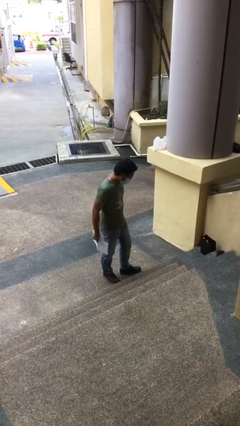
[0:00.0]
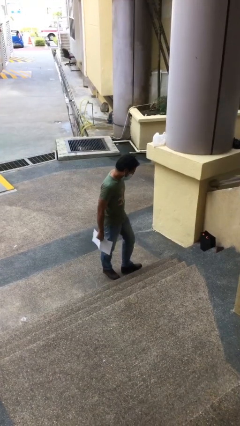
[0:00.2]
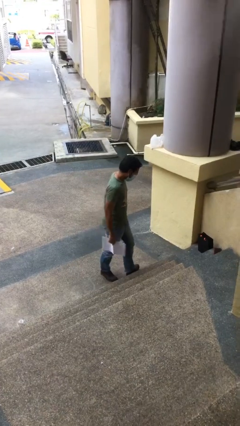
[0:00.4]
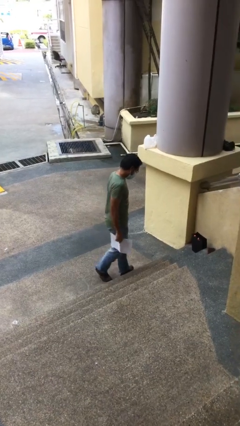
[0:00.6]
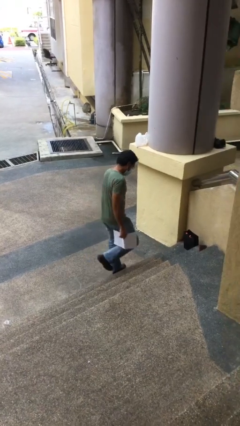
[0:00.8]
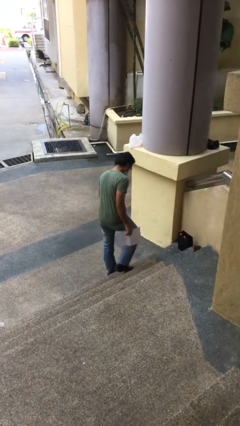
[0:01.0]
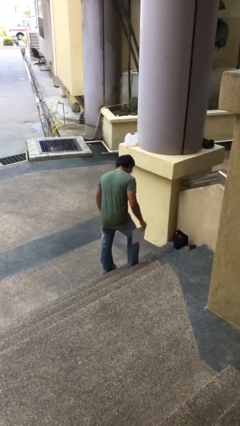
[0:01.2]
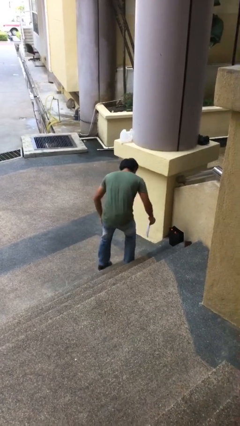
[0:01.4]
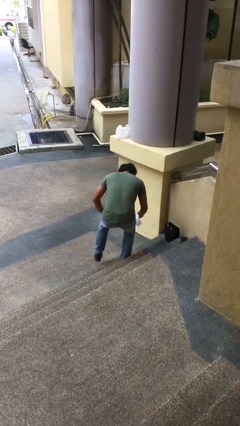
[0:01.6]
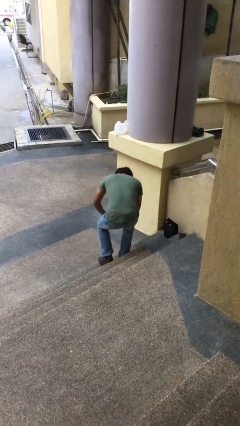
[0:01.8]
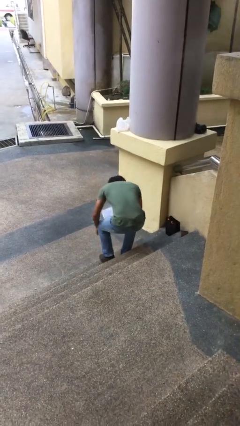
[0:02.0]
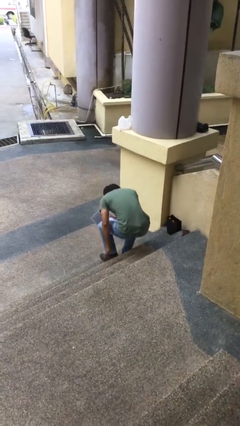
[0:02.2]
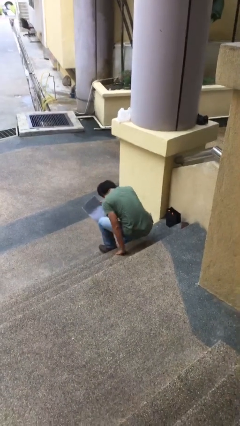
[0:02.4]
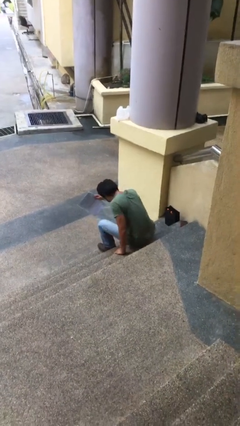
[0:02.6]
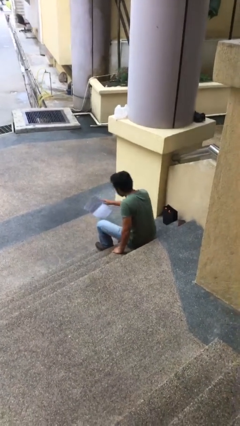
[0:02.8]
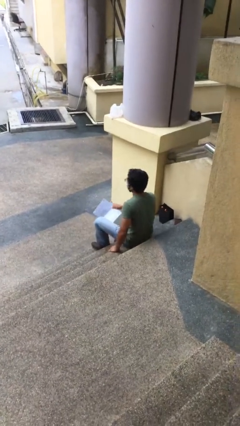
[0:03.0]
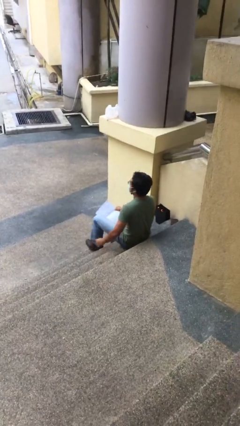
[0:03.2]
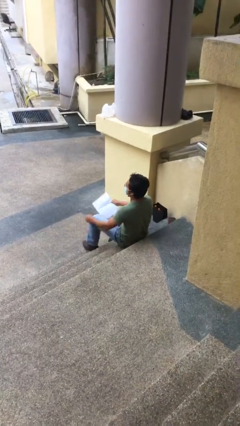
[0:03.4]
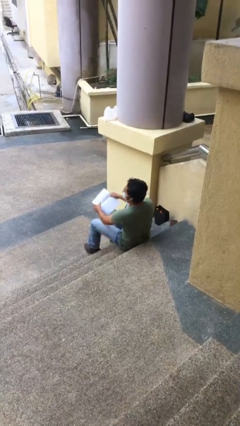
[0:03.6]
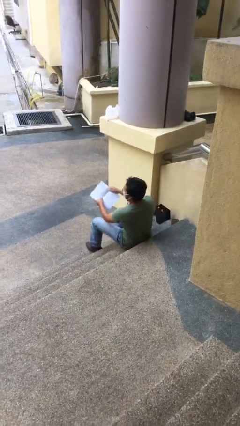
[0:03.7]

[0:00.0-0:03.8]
person sits down

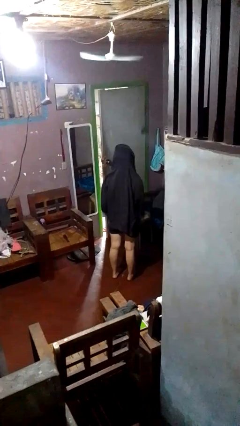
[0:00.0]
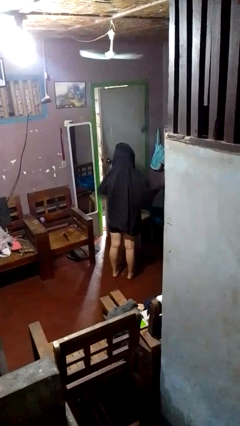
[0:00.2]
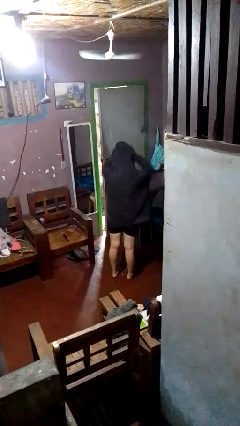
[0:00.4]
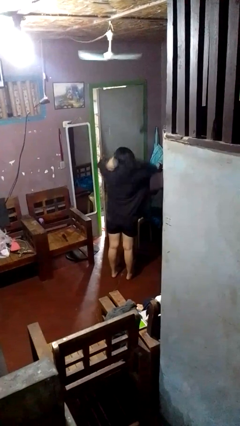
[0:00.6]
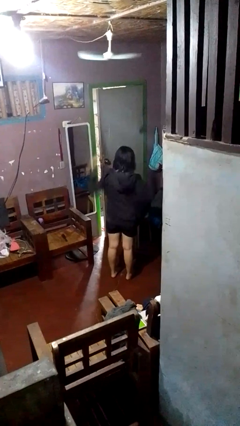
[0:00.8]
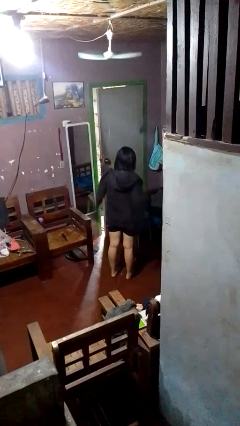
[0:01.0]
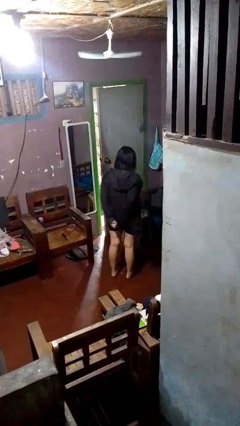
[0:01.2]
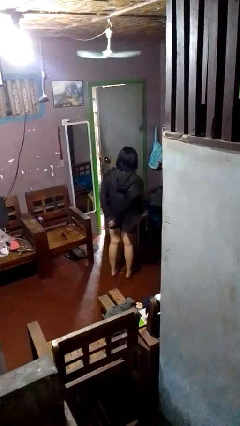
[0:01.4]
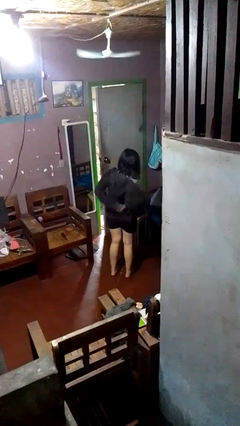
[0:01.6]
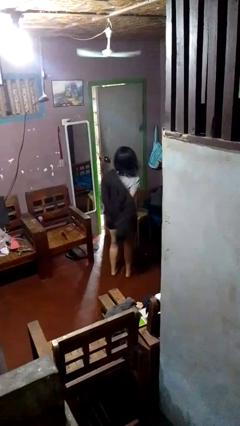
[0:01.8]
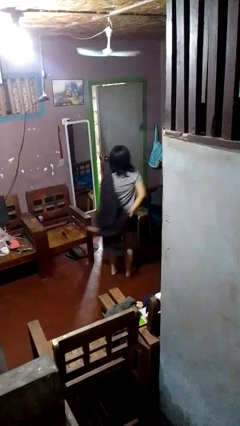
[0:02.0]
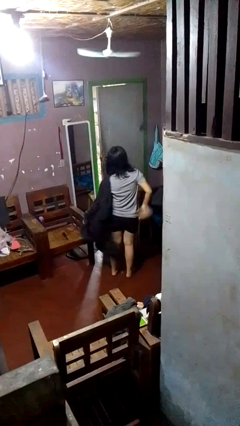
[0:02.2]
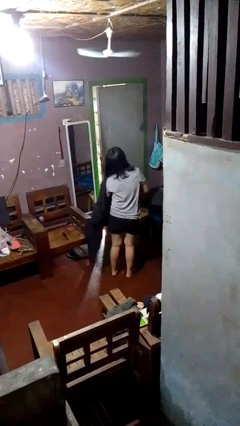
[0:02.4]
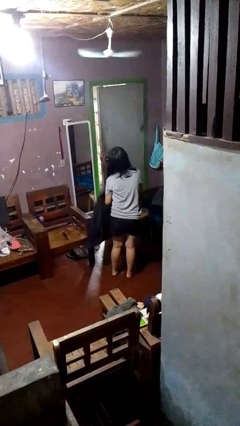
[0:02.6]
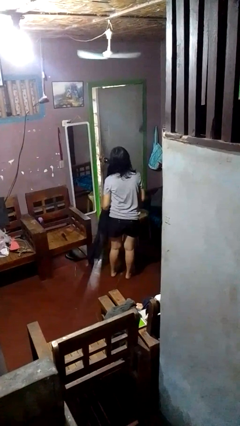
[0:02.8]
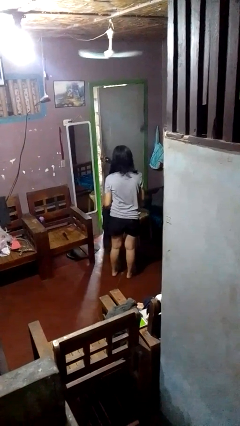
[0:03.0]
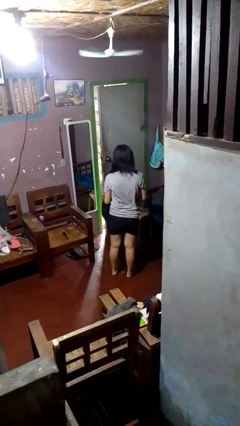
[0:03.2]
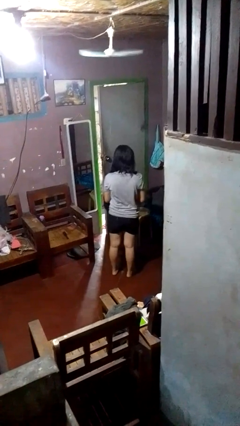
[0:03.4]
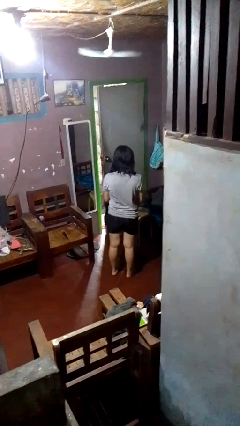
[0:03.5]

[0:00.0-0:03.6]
person takes off hoodie

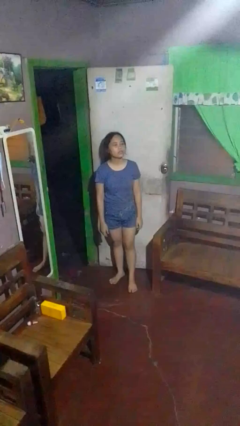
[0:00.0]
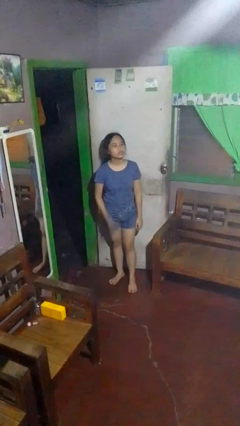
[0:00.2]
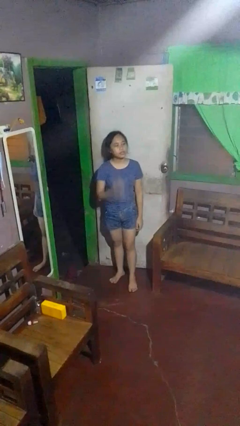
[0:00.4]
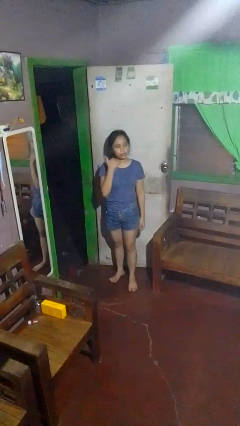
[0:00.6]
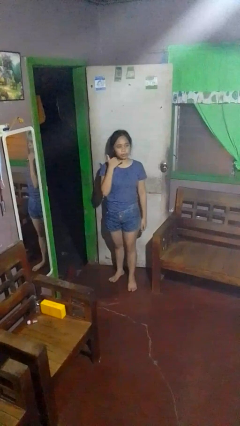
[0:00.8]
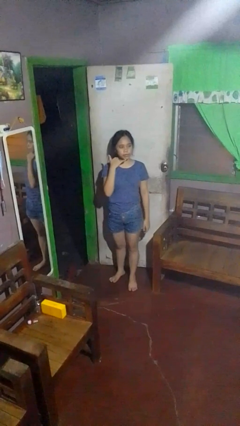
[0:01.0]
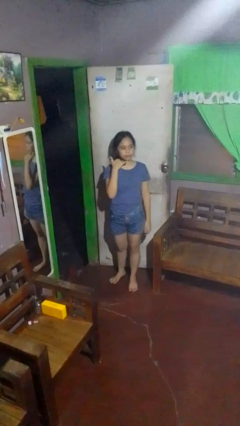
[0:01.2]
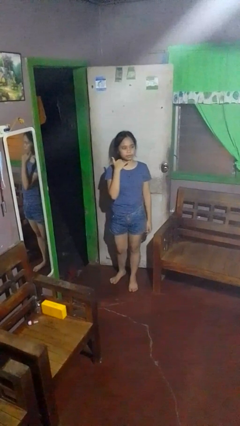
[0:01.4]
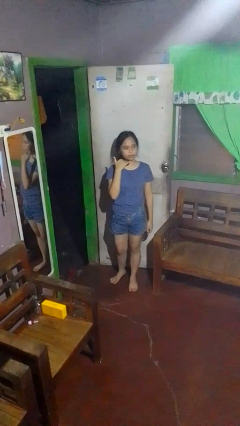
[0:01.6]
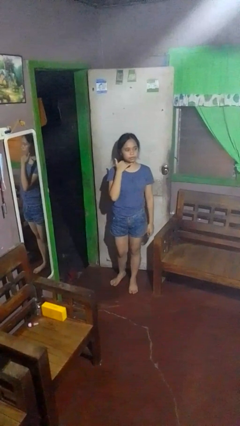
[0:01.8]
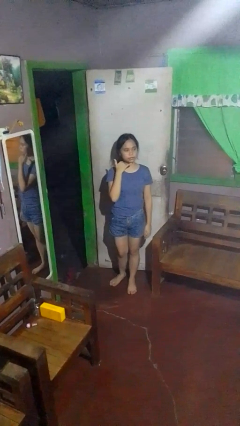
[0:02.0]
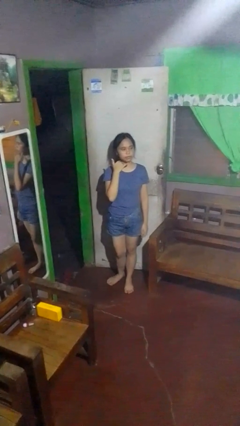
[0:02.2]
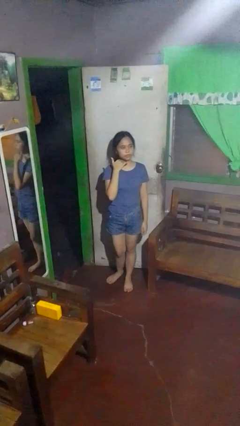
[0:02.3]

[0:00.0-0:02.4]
person gestures call me

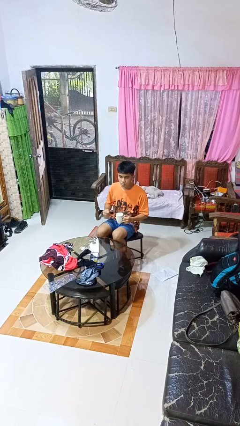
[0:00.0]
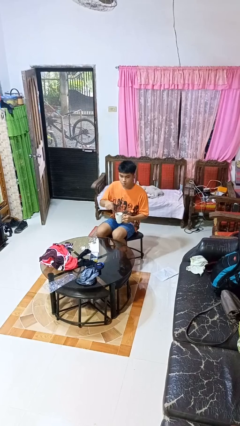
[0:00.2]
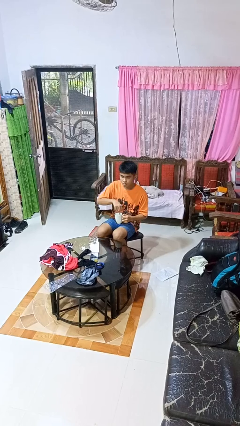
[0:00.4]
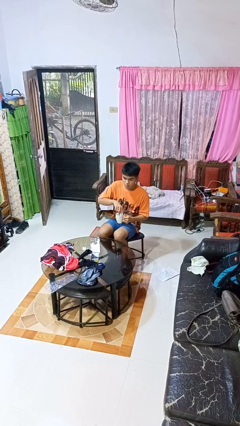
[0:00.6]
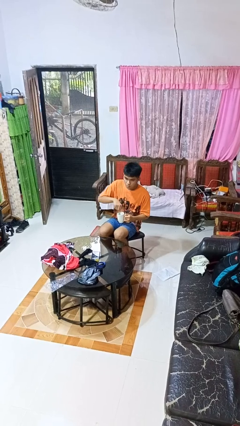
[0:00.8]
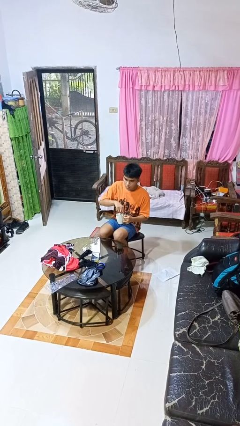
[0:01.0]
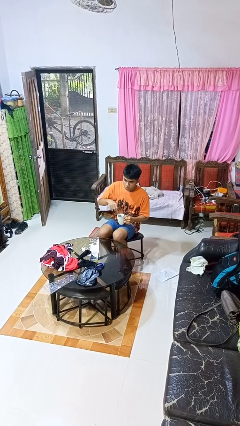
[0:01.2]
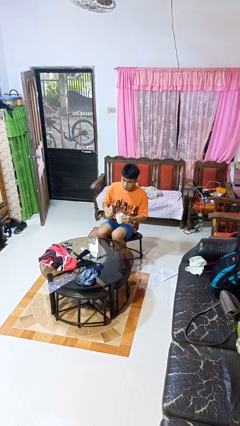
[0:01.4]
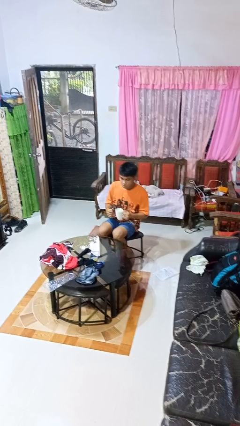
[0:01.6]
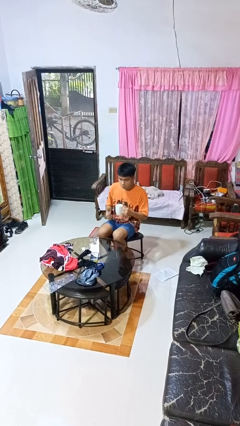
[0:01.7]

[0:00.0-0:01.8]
person stirs mug

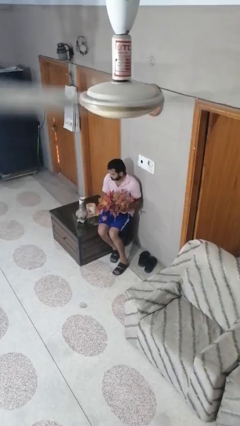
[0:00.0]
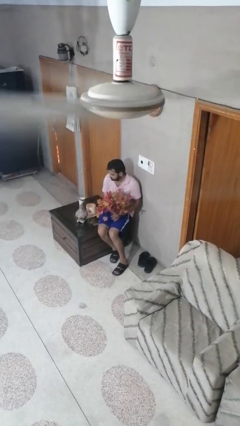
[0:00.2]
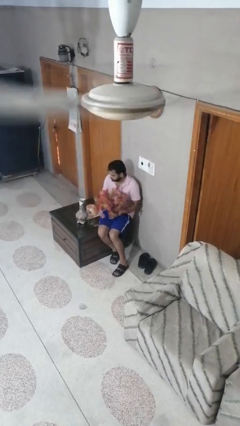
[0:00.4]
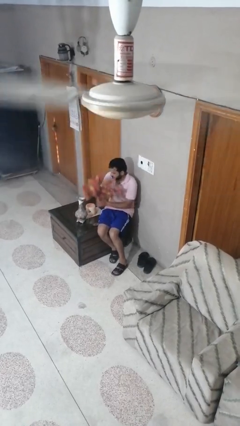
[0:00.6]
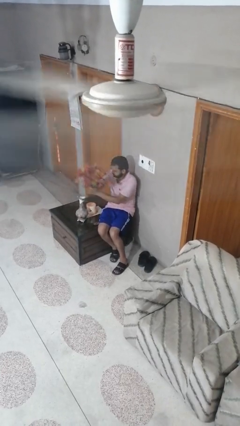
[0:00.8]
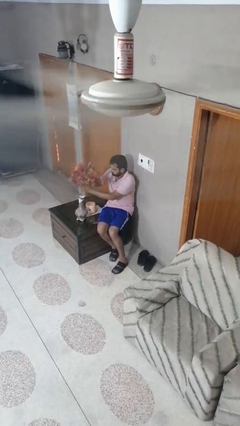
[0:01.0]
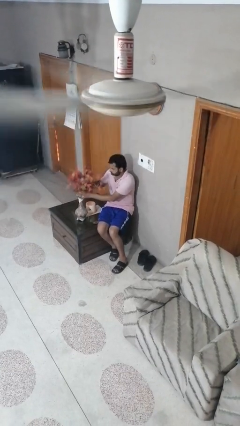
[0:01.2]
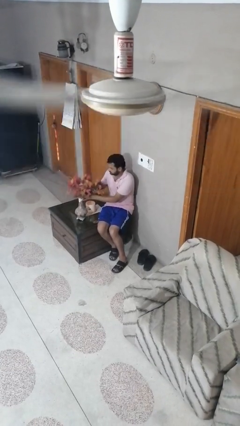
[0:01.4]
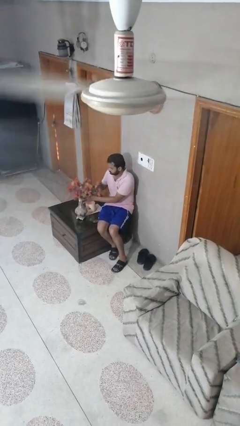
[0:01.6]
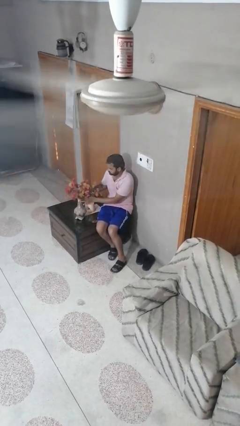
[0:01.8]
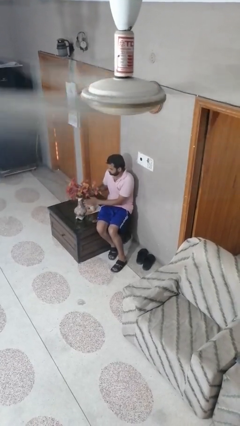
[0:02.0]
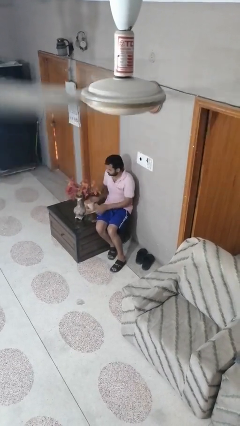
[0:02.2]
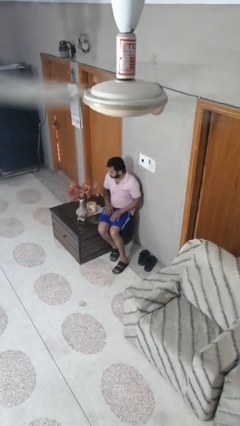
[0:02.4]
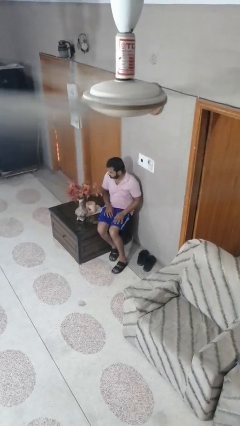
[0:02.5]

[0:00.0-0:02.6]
person arranges flowers in vase

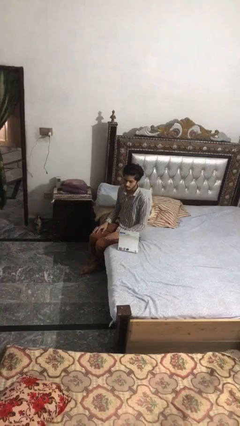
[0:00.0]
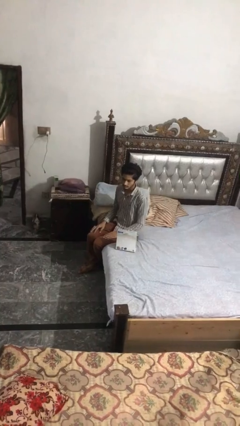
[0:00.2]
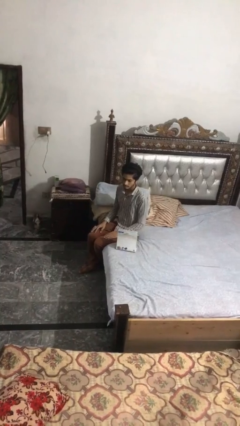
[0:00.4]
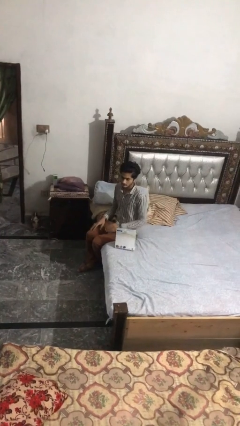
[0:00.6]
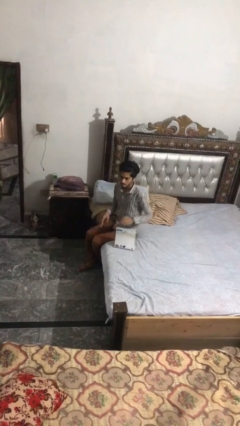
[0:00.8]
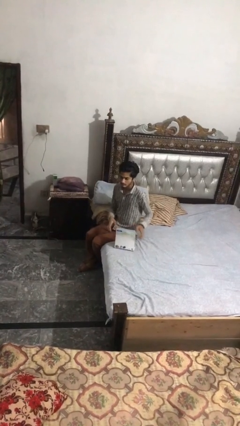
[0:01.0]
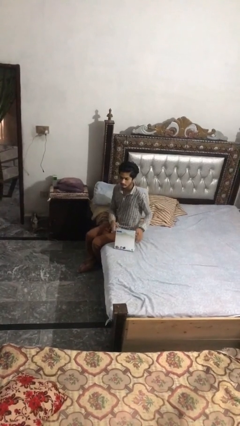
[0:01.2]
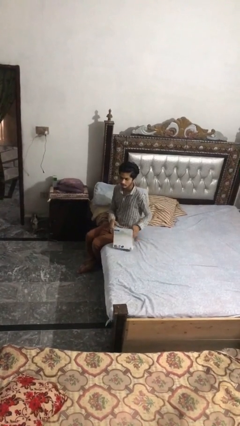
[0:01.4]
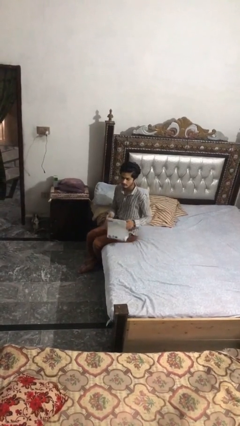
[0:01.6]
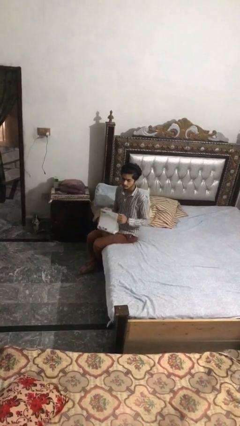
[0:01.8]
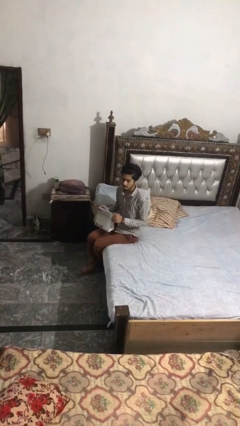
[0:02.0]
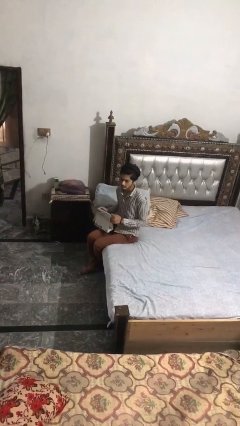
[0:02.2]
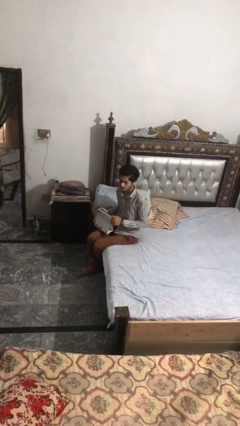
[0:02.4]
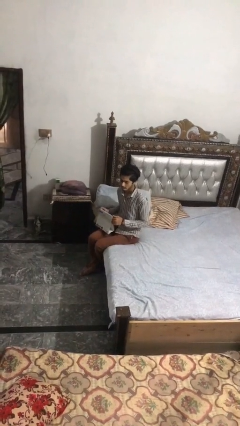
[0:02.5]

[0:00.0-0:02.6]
person picks up object from bed

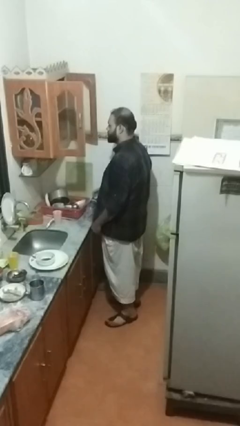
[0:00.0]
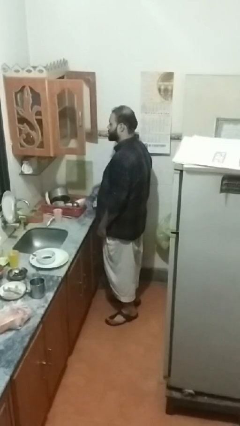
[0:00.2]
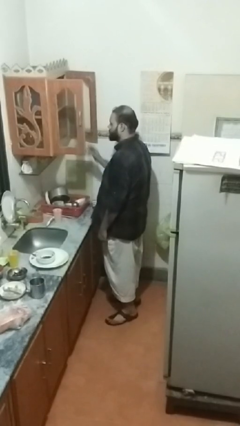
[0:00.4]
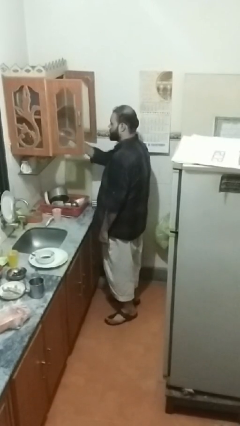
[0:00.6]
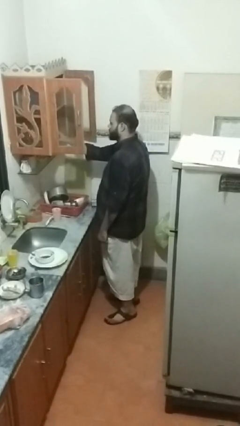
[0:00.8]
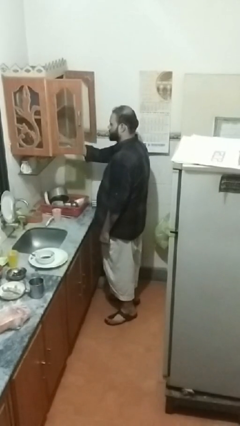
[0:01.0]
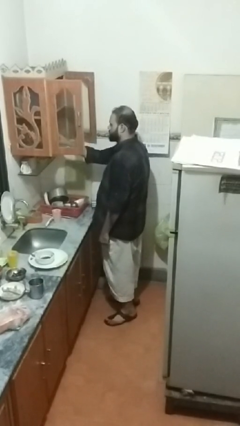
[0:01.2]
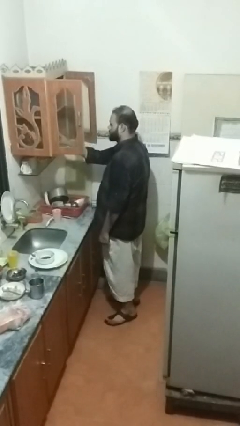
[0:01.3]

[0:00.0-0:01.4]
person puts object in cabinet
